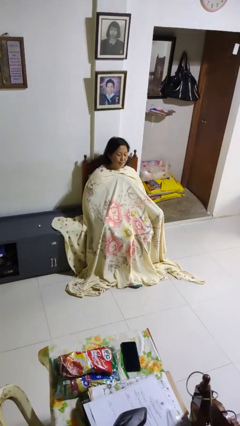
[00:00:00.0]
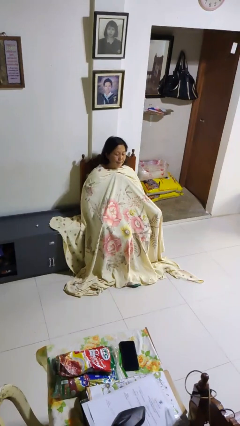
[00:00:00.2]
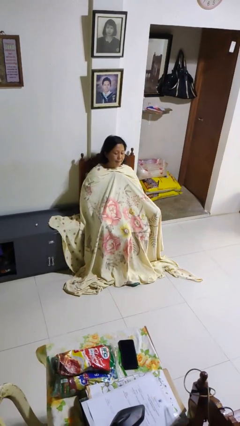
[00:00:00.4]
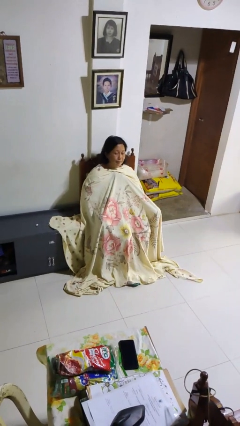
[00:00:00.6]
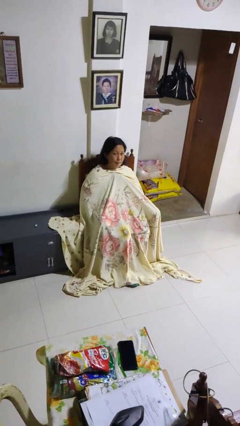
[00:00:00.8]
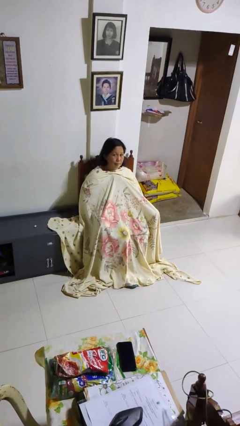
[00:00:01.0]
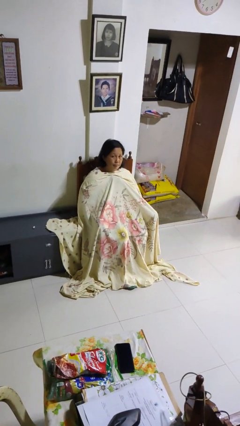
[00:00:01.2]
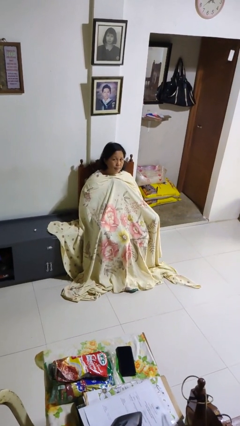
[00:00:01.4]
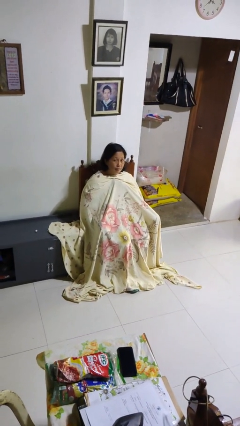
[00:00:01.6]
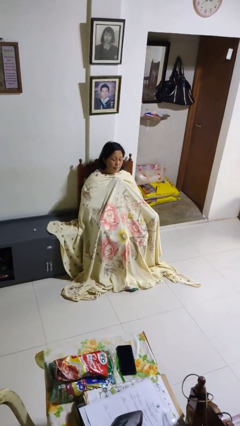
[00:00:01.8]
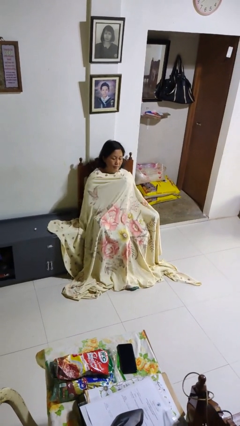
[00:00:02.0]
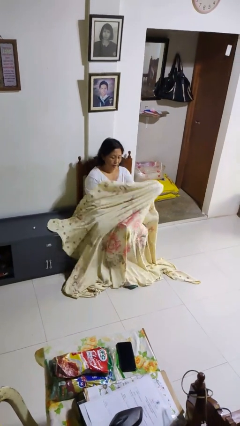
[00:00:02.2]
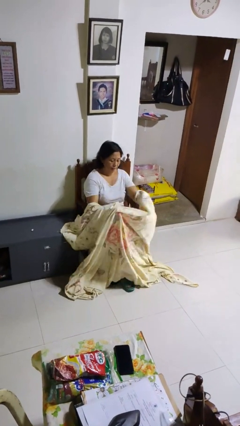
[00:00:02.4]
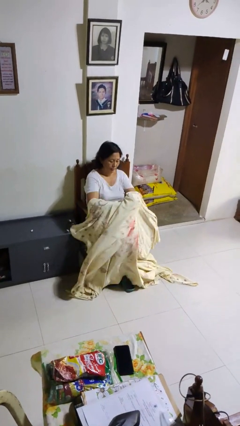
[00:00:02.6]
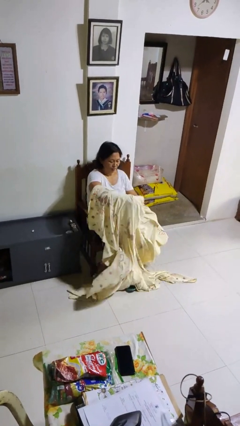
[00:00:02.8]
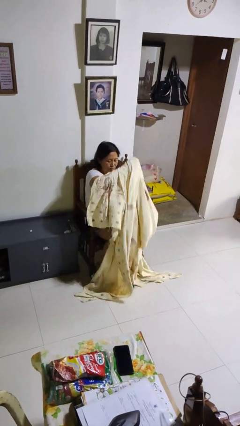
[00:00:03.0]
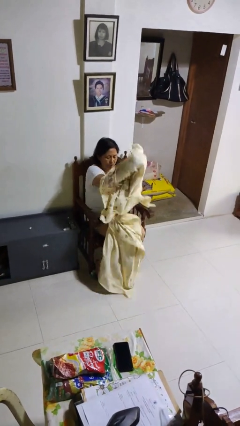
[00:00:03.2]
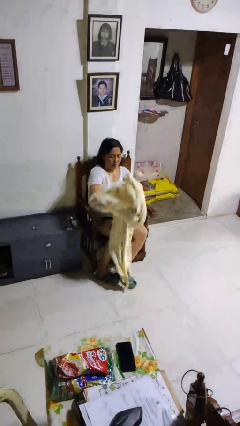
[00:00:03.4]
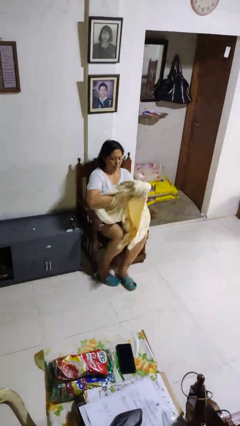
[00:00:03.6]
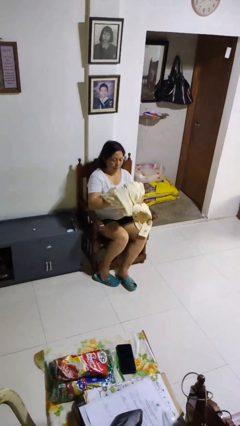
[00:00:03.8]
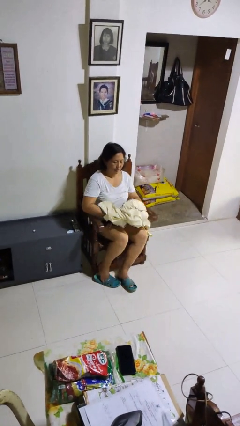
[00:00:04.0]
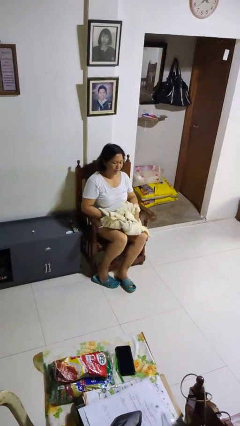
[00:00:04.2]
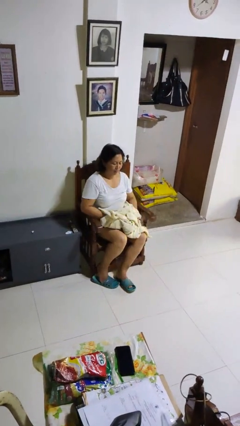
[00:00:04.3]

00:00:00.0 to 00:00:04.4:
person uncovers with blanket

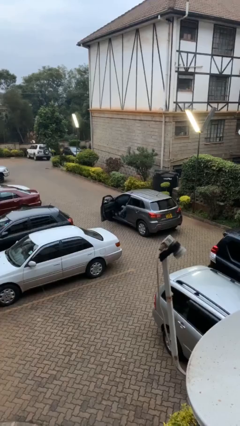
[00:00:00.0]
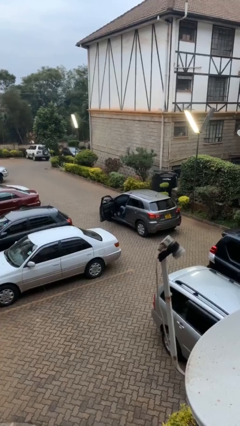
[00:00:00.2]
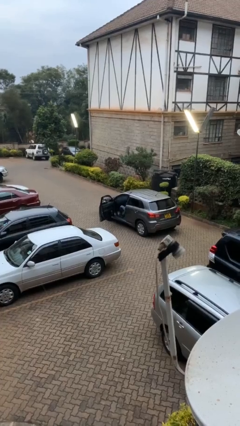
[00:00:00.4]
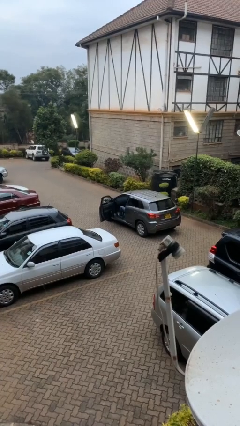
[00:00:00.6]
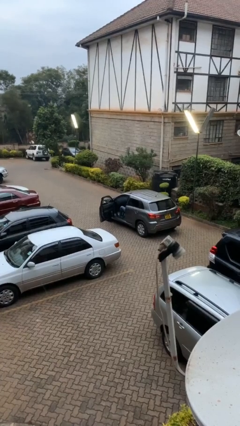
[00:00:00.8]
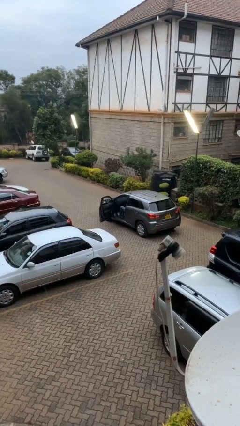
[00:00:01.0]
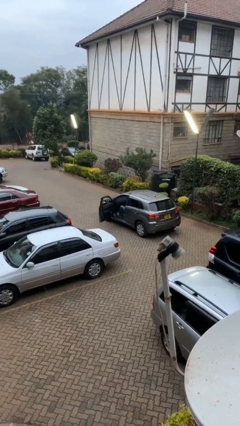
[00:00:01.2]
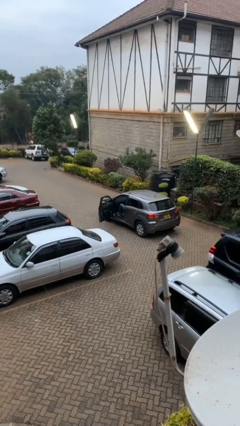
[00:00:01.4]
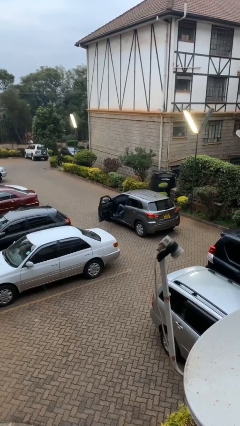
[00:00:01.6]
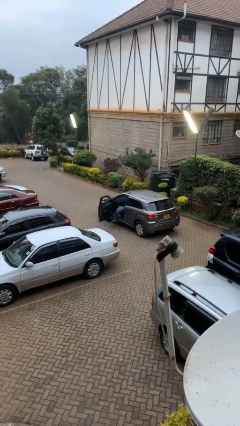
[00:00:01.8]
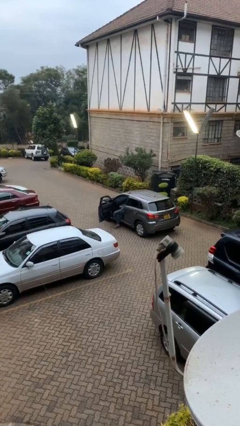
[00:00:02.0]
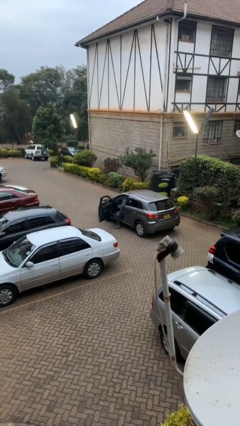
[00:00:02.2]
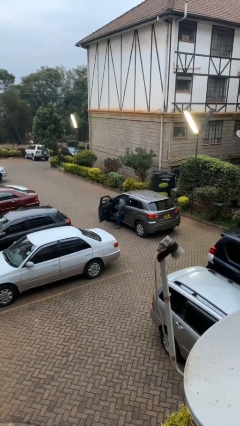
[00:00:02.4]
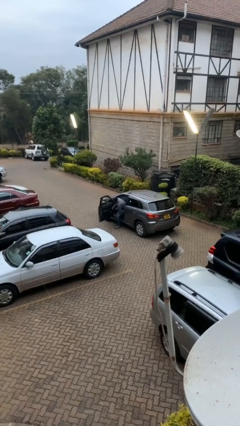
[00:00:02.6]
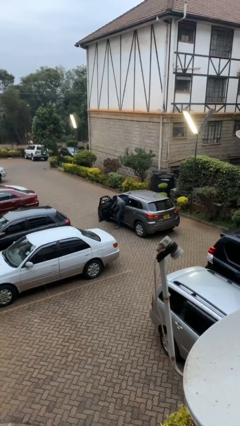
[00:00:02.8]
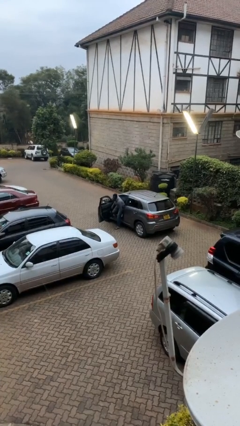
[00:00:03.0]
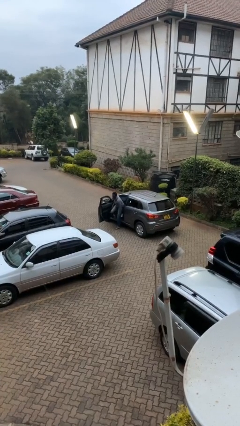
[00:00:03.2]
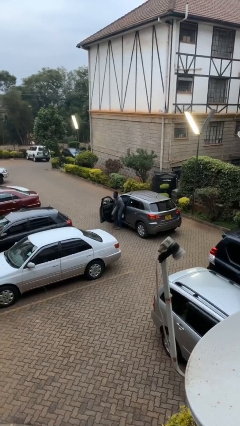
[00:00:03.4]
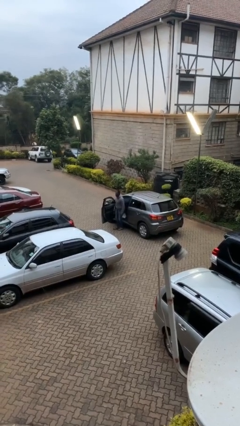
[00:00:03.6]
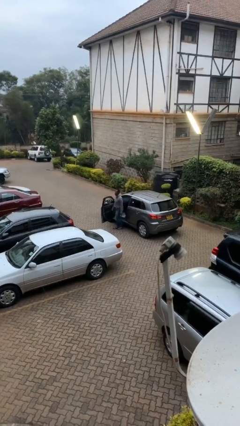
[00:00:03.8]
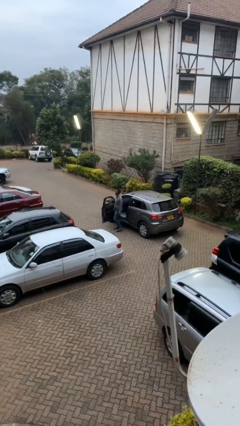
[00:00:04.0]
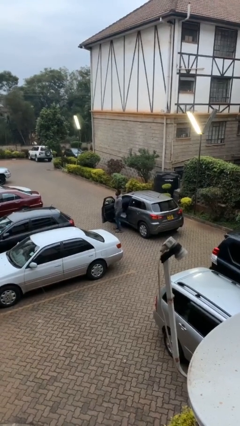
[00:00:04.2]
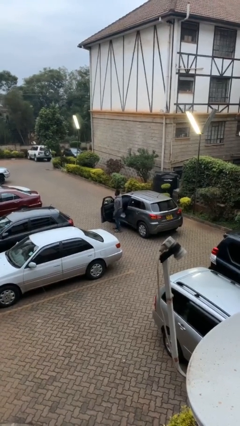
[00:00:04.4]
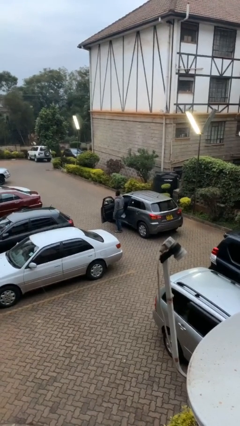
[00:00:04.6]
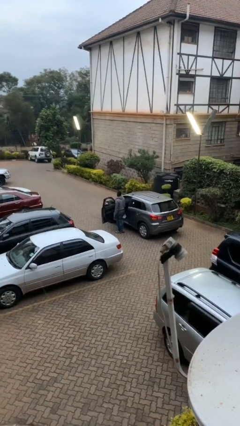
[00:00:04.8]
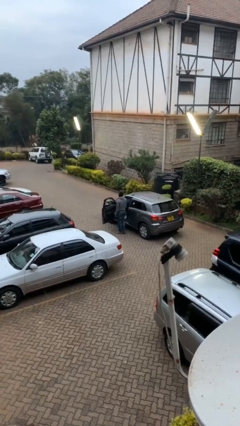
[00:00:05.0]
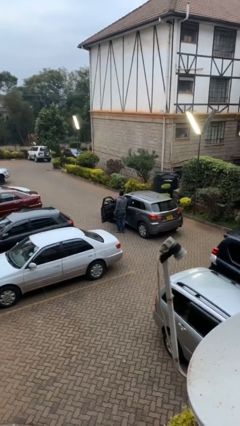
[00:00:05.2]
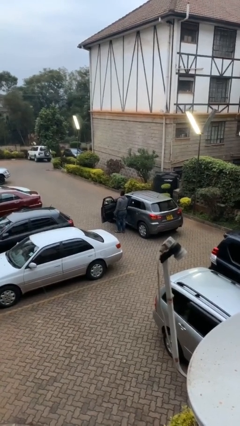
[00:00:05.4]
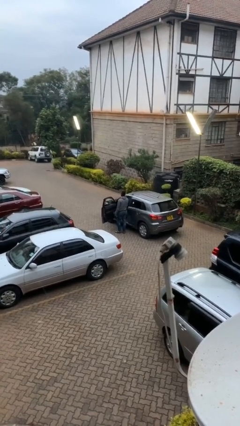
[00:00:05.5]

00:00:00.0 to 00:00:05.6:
person exits car

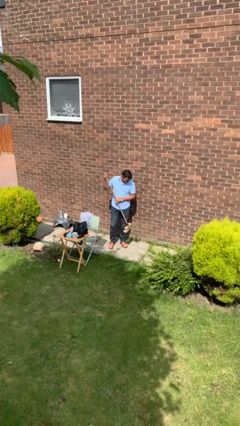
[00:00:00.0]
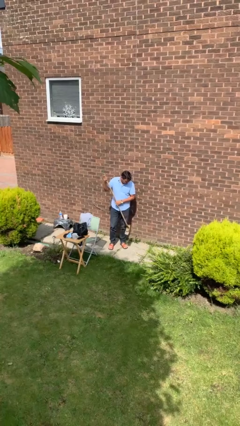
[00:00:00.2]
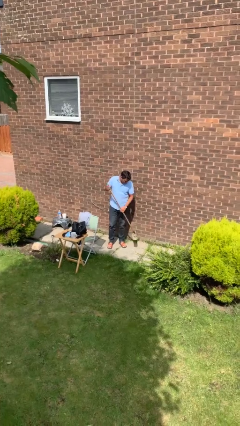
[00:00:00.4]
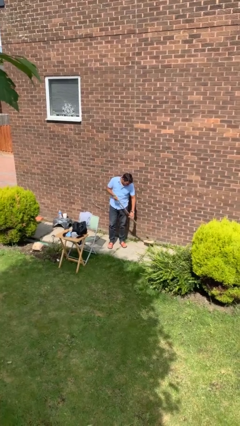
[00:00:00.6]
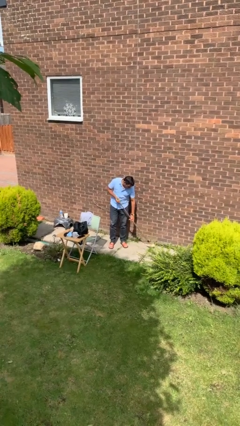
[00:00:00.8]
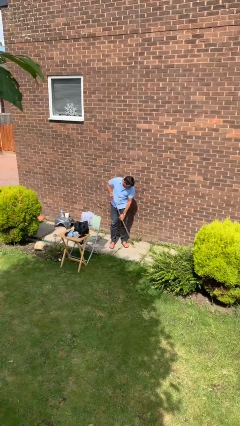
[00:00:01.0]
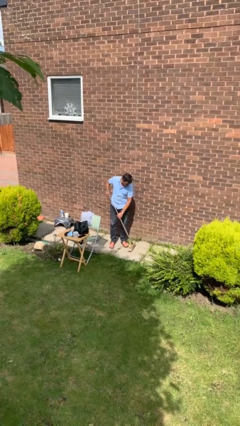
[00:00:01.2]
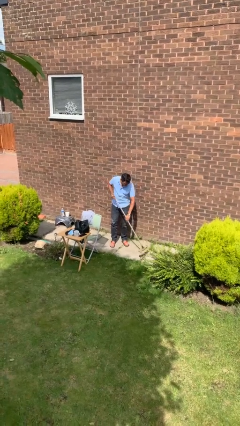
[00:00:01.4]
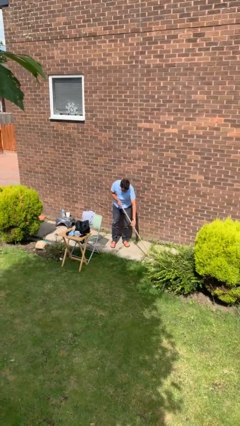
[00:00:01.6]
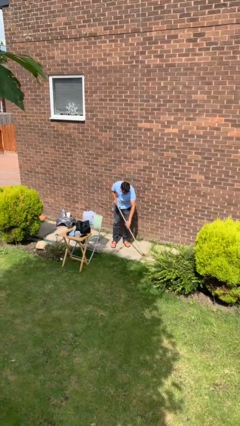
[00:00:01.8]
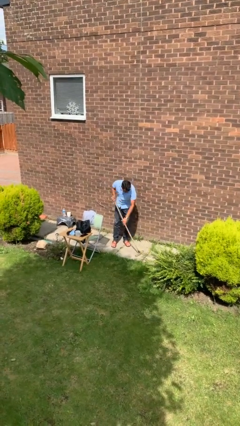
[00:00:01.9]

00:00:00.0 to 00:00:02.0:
person sweeps floor

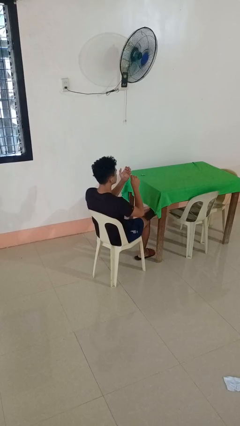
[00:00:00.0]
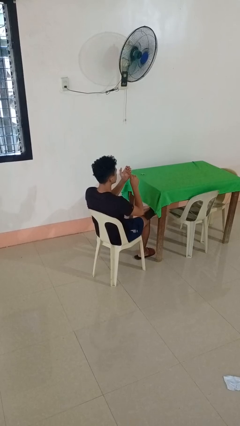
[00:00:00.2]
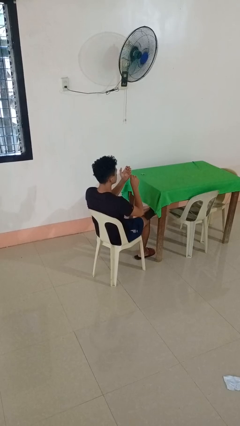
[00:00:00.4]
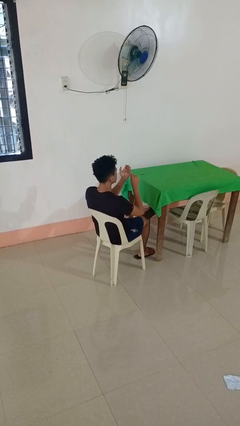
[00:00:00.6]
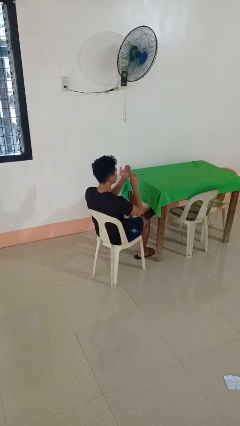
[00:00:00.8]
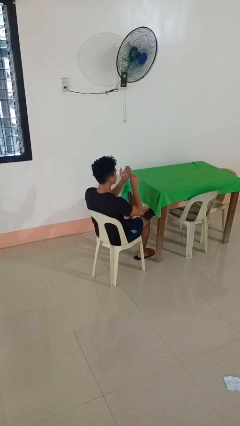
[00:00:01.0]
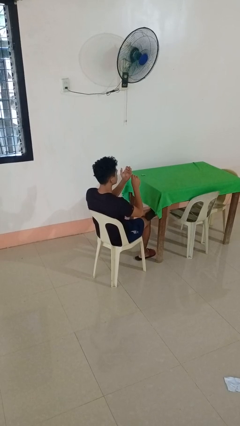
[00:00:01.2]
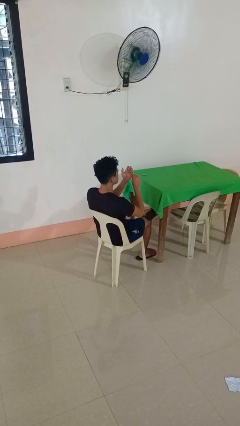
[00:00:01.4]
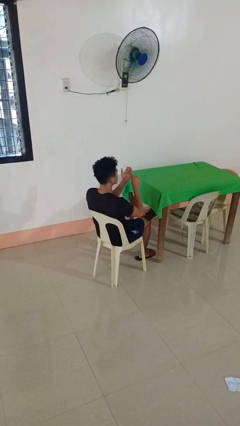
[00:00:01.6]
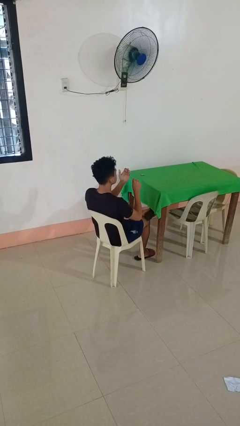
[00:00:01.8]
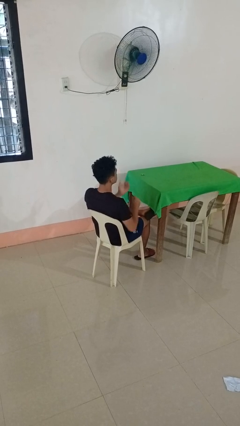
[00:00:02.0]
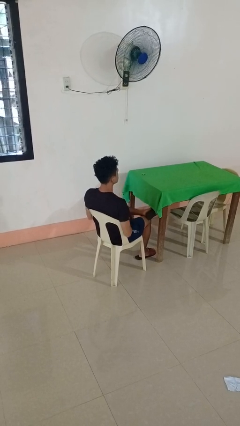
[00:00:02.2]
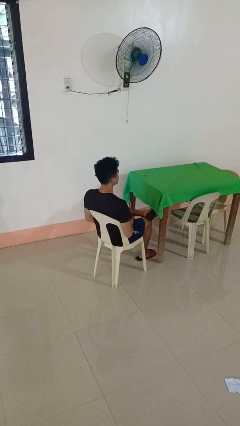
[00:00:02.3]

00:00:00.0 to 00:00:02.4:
person files fingernails

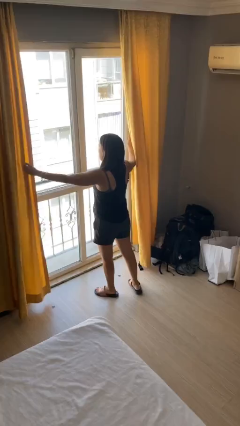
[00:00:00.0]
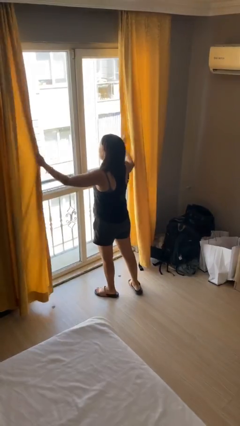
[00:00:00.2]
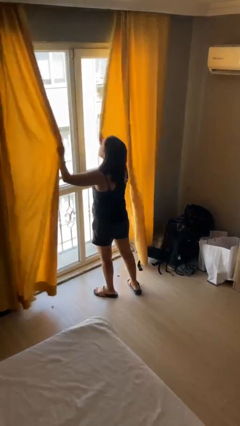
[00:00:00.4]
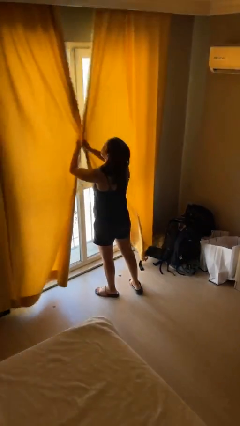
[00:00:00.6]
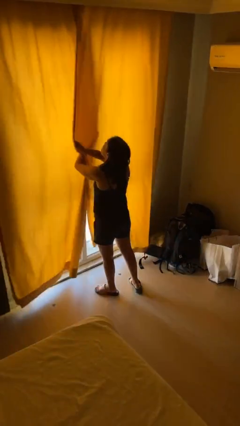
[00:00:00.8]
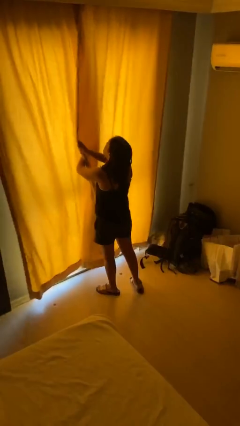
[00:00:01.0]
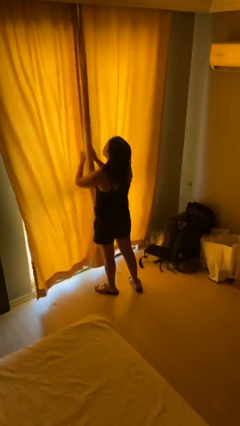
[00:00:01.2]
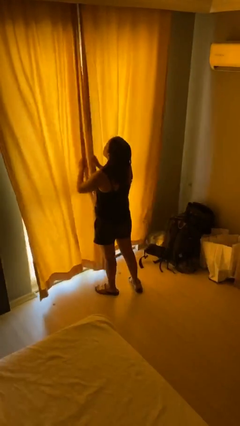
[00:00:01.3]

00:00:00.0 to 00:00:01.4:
person closes curtains

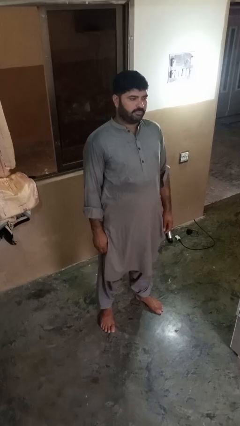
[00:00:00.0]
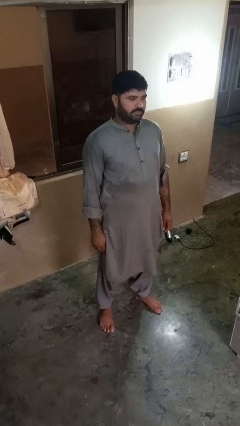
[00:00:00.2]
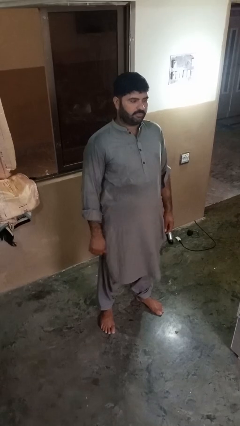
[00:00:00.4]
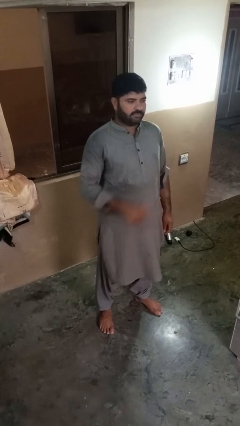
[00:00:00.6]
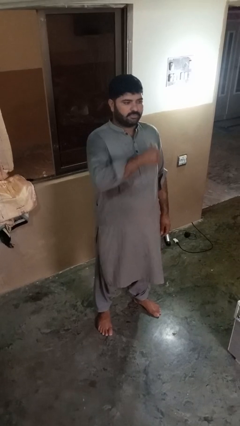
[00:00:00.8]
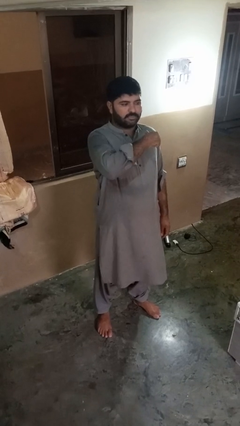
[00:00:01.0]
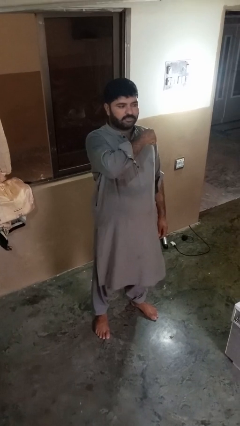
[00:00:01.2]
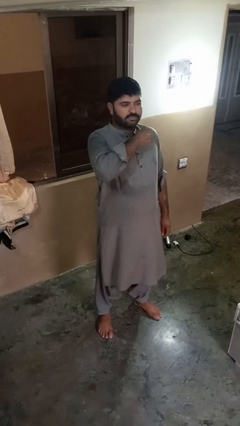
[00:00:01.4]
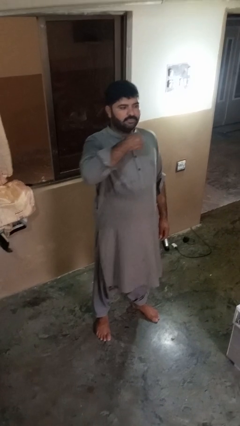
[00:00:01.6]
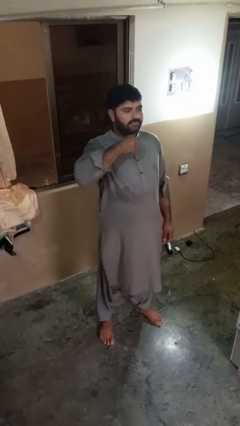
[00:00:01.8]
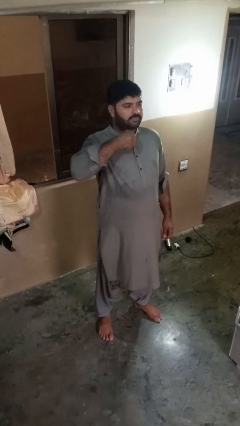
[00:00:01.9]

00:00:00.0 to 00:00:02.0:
person gestures cut
